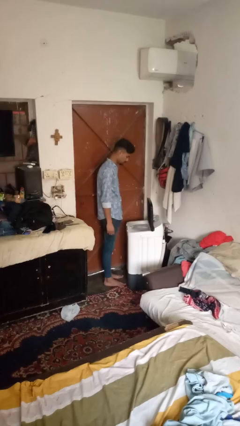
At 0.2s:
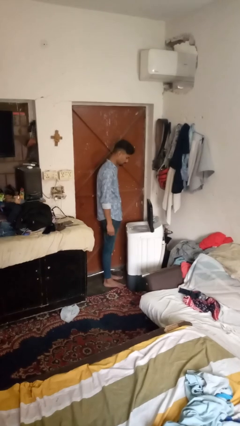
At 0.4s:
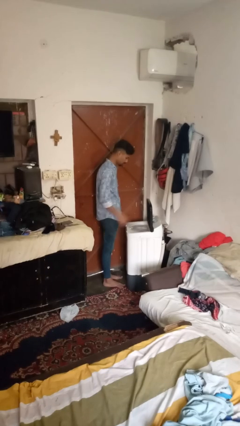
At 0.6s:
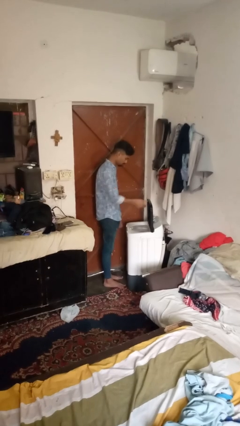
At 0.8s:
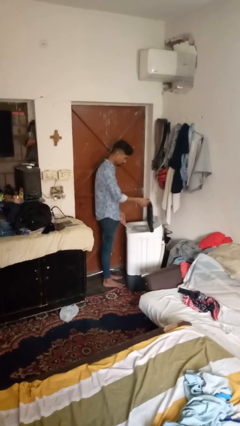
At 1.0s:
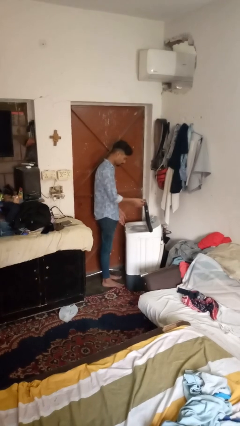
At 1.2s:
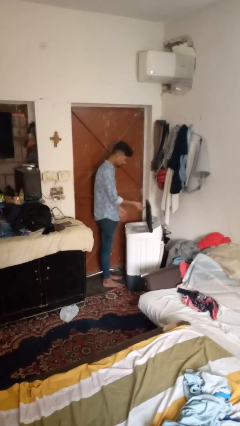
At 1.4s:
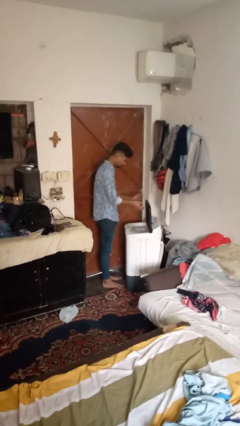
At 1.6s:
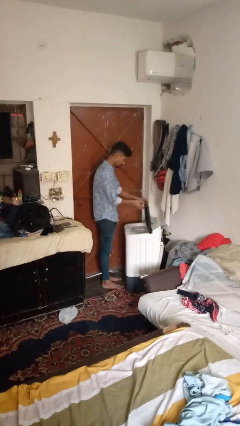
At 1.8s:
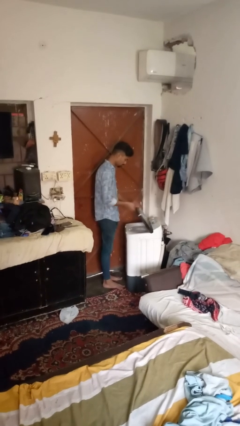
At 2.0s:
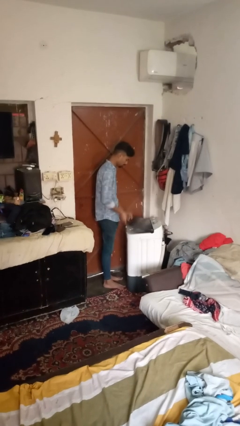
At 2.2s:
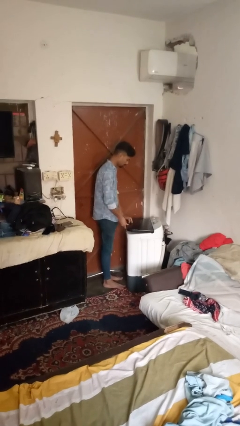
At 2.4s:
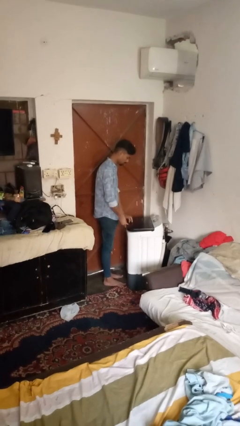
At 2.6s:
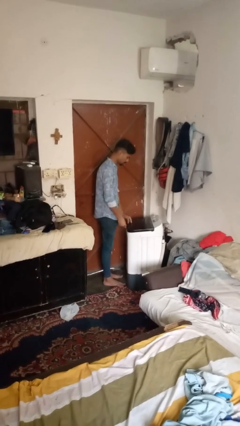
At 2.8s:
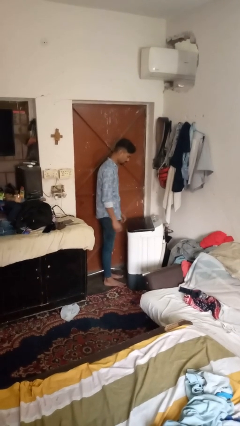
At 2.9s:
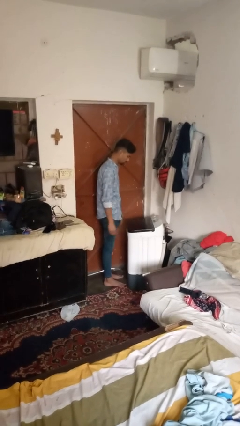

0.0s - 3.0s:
person closes clothes washer

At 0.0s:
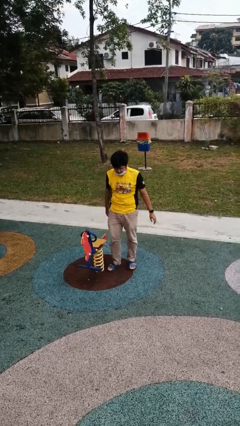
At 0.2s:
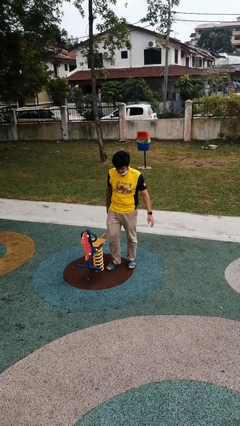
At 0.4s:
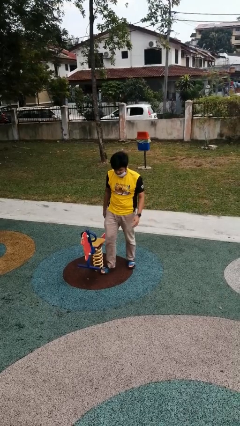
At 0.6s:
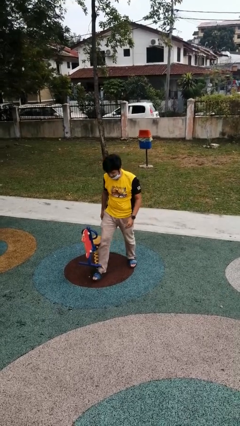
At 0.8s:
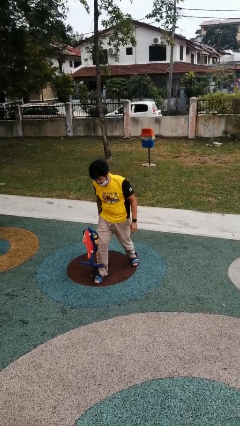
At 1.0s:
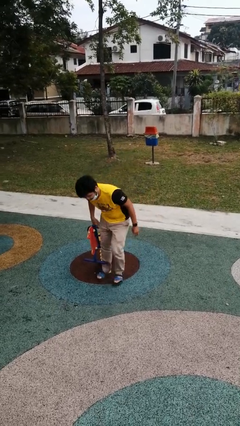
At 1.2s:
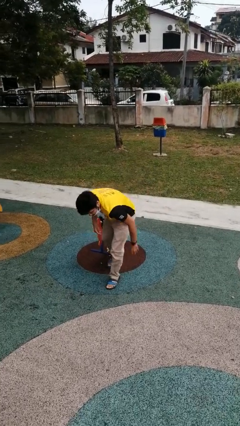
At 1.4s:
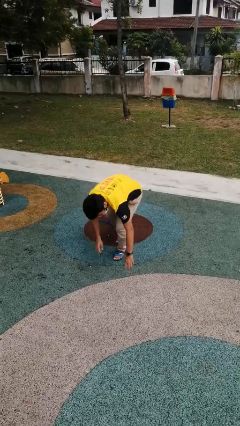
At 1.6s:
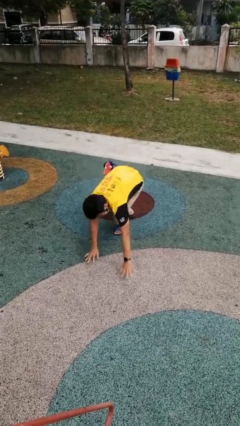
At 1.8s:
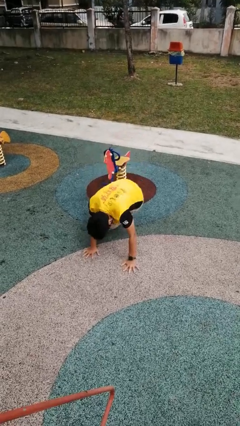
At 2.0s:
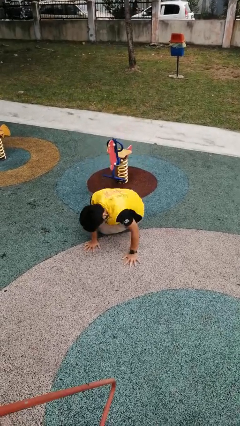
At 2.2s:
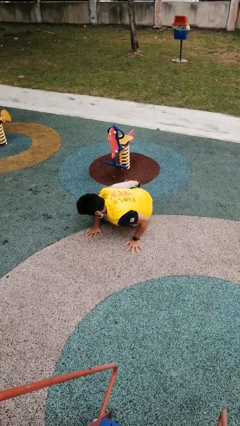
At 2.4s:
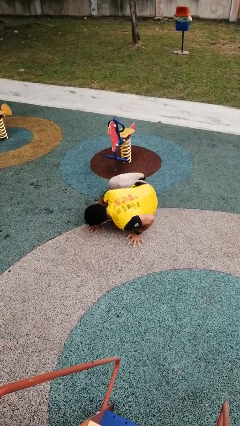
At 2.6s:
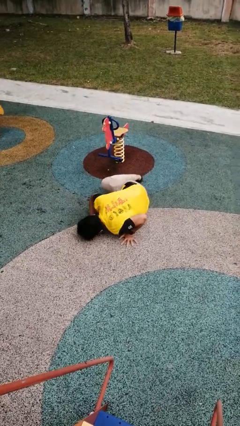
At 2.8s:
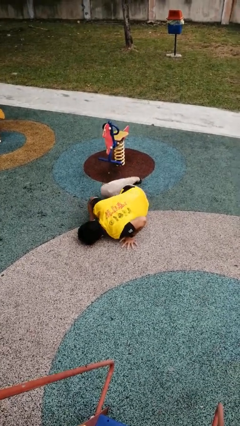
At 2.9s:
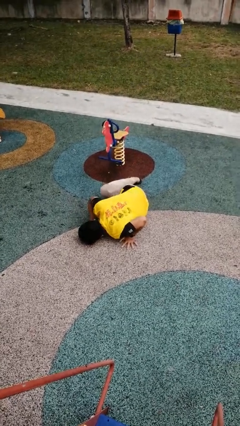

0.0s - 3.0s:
person trips on object on floor

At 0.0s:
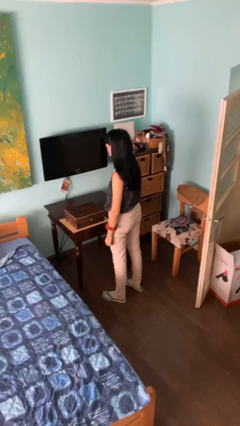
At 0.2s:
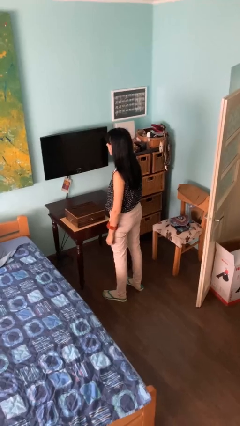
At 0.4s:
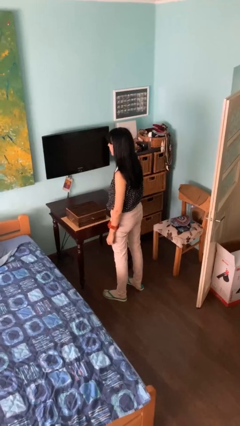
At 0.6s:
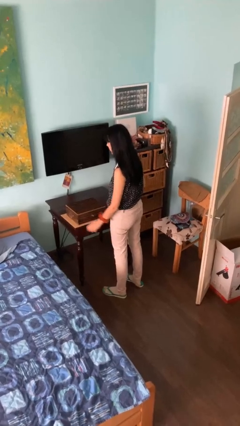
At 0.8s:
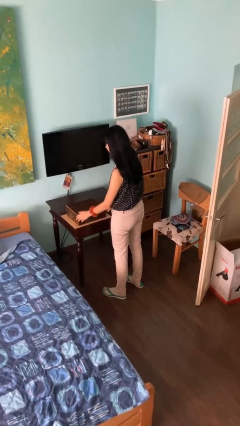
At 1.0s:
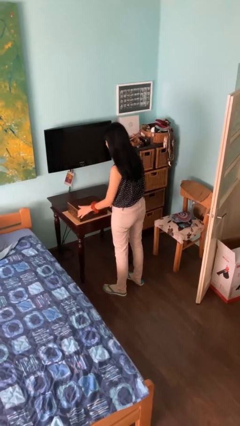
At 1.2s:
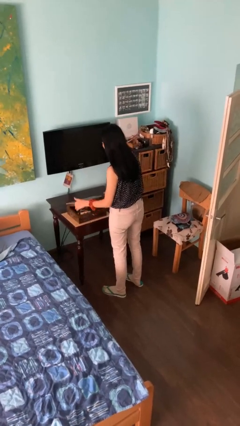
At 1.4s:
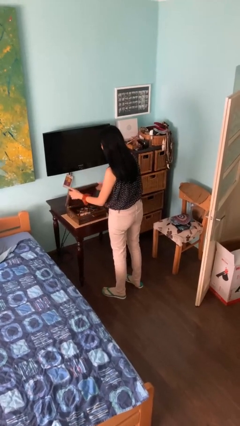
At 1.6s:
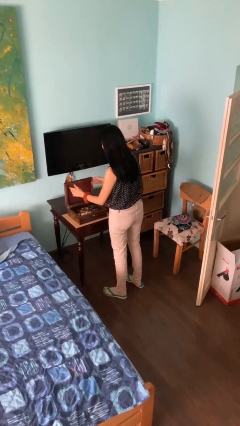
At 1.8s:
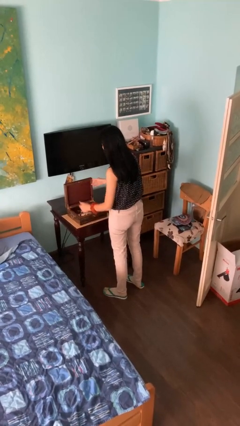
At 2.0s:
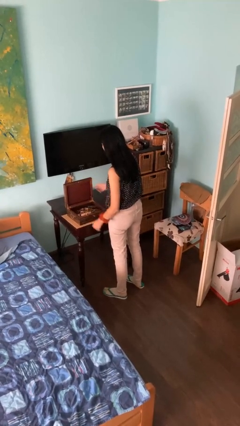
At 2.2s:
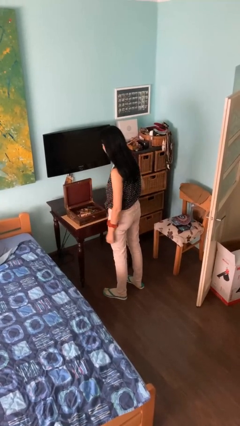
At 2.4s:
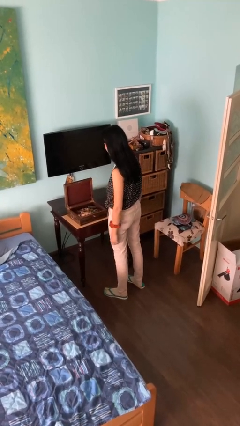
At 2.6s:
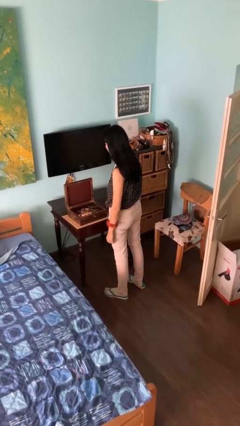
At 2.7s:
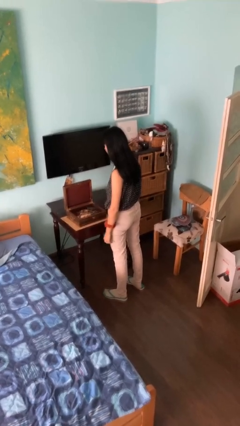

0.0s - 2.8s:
person opens jewelry box

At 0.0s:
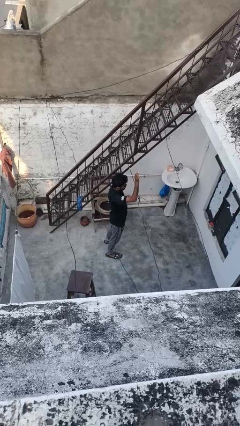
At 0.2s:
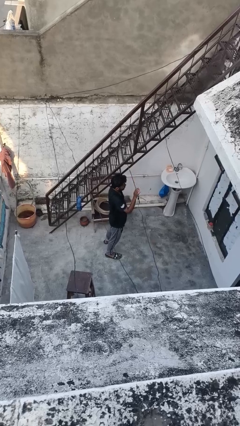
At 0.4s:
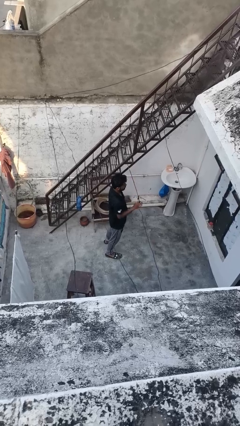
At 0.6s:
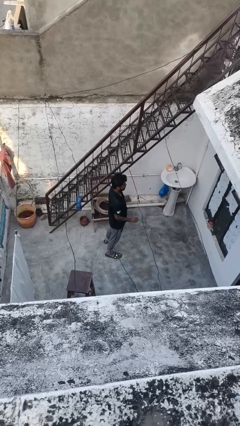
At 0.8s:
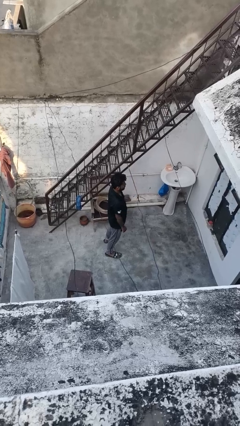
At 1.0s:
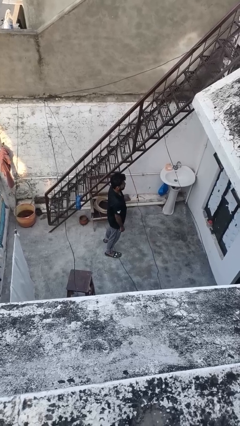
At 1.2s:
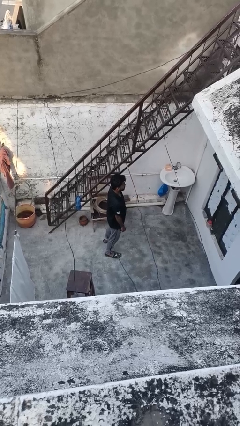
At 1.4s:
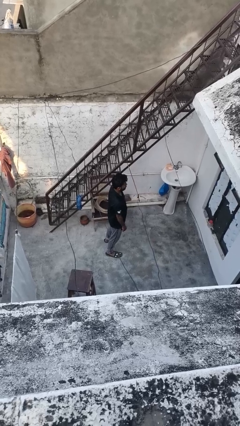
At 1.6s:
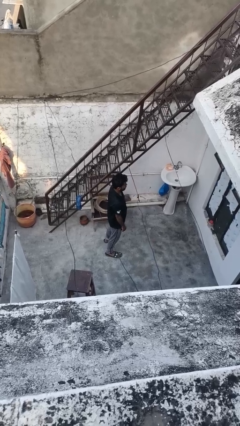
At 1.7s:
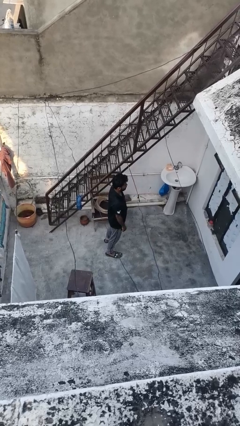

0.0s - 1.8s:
person gestures lower hand

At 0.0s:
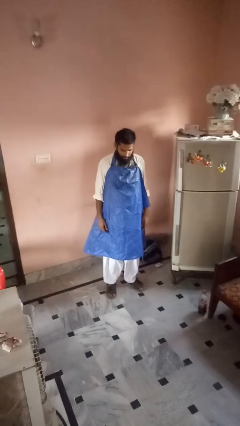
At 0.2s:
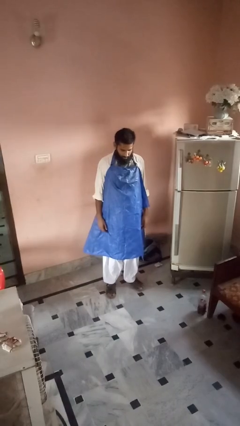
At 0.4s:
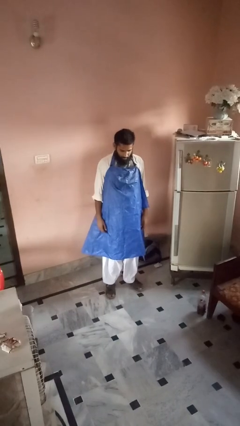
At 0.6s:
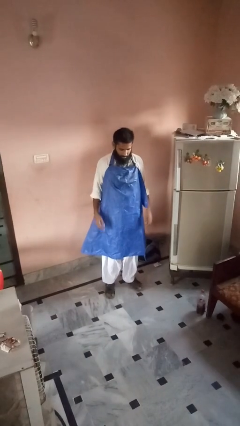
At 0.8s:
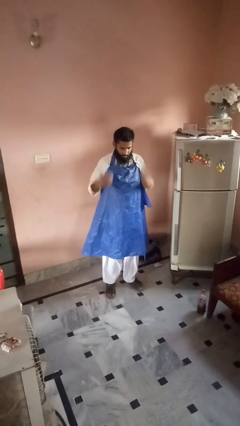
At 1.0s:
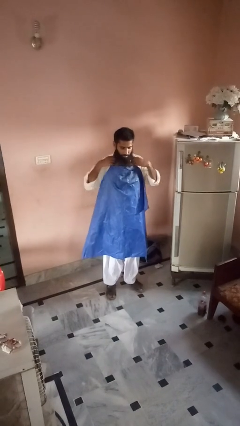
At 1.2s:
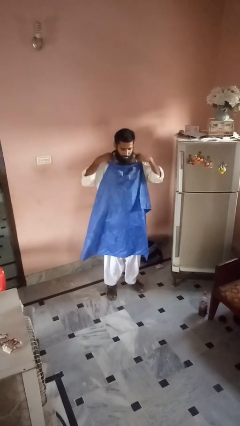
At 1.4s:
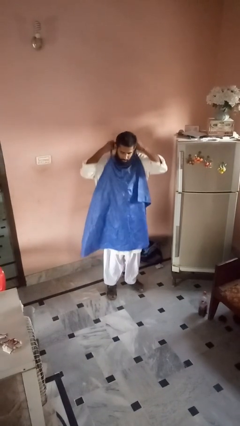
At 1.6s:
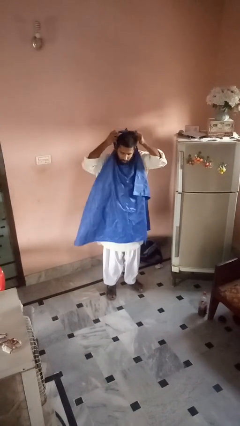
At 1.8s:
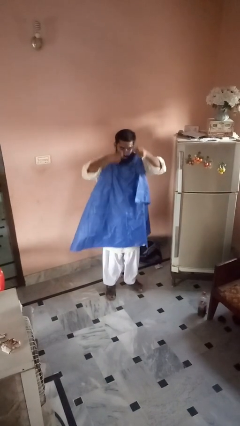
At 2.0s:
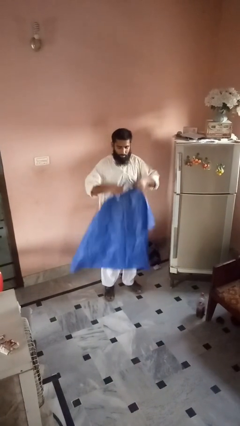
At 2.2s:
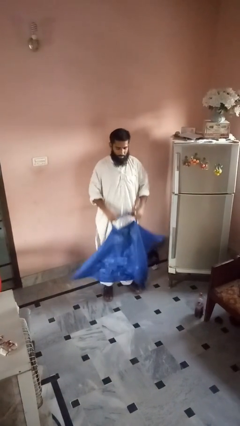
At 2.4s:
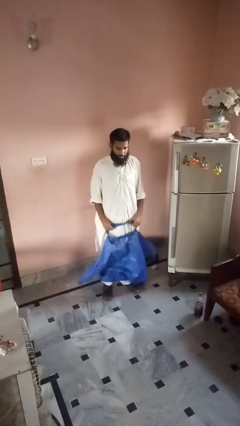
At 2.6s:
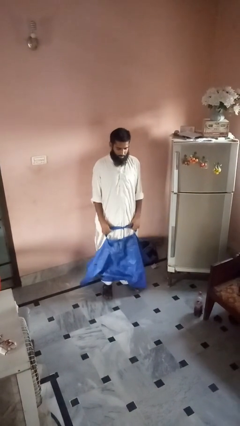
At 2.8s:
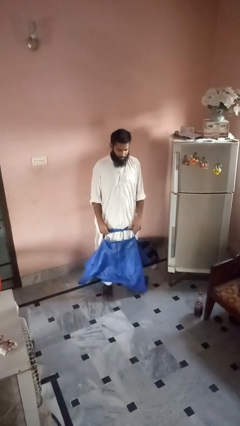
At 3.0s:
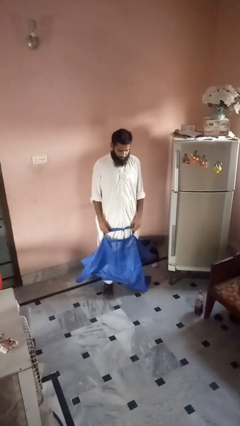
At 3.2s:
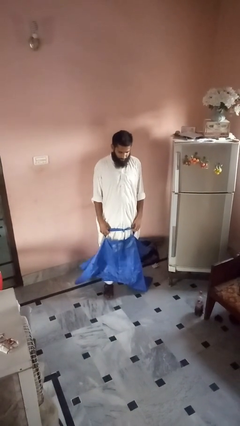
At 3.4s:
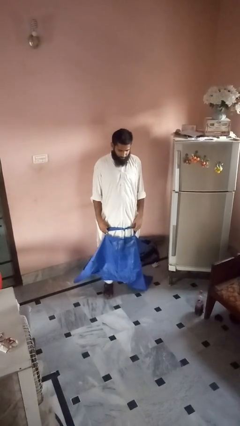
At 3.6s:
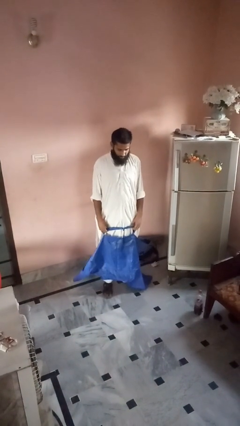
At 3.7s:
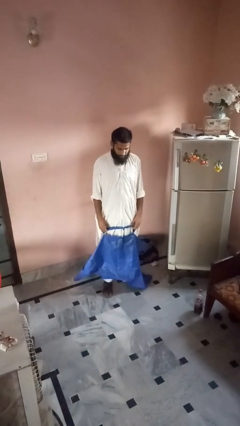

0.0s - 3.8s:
person takes off apron

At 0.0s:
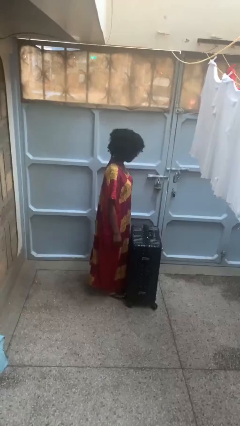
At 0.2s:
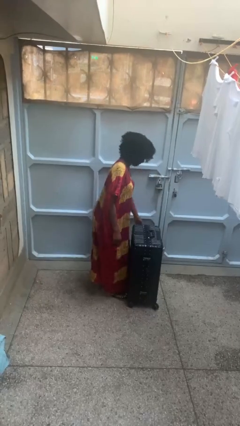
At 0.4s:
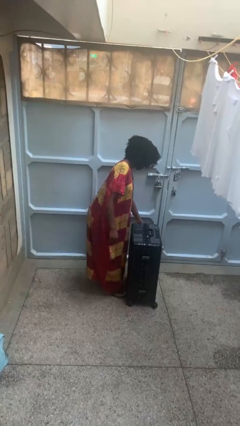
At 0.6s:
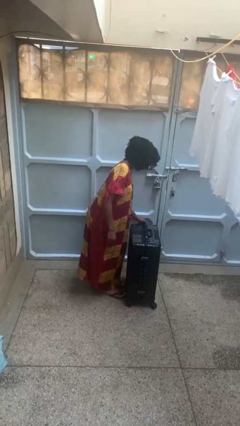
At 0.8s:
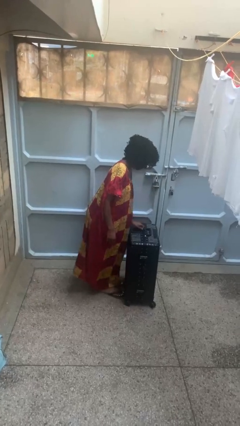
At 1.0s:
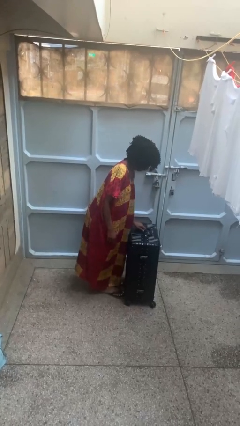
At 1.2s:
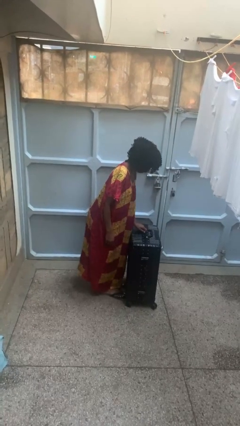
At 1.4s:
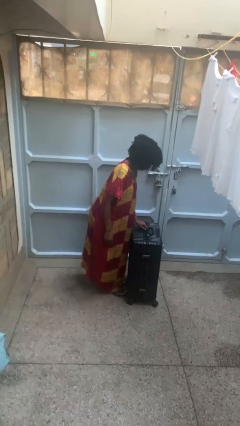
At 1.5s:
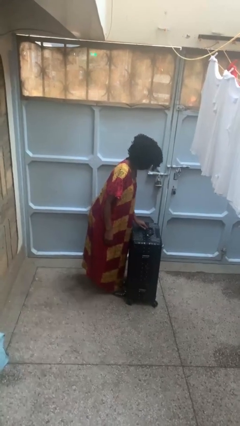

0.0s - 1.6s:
person opens suitcase

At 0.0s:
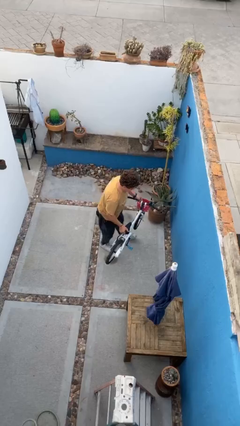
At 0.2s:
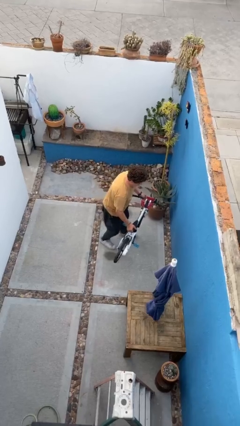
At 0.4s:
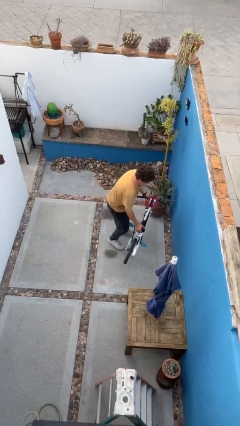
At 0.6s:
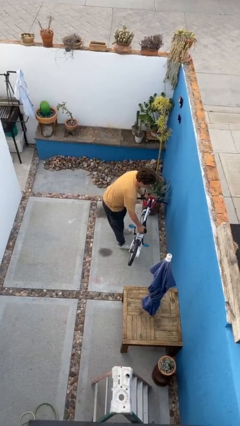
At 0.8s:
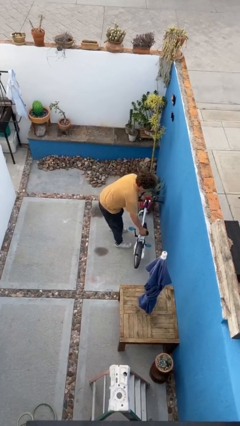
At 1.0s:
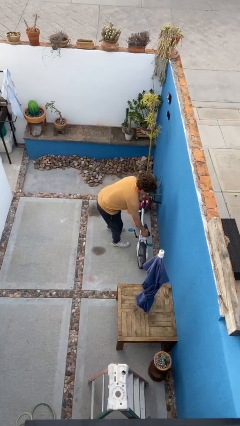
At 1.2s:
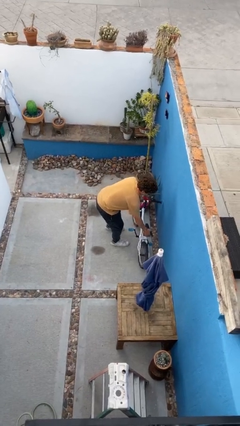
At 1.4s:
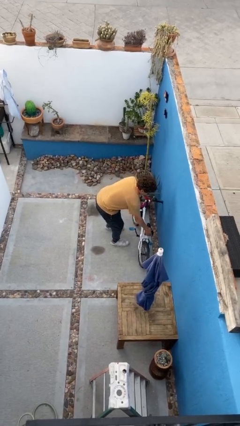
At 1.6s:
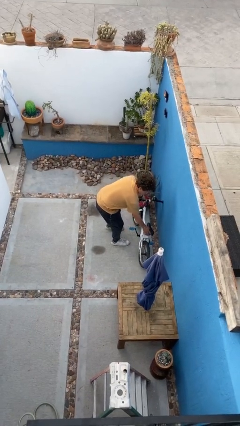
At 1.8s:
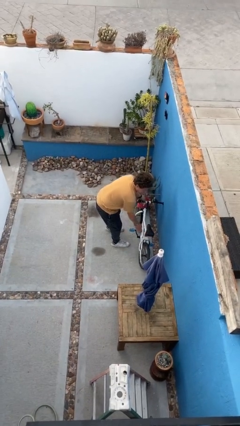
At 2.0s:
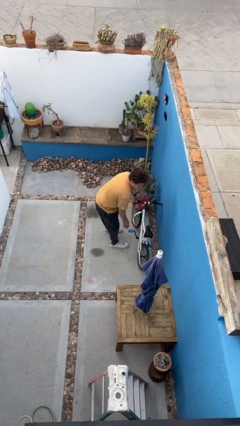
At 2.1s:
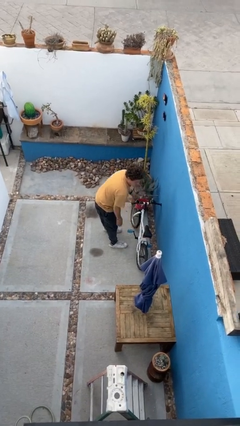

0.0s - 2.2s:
person puts down object on floor
